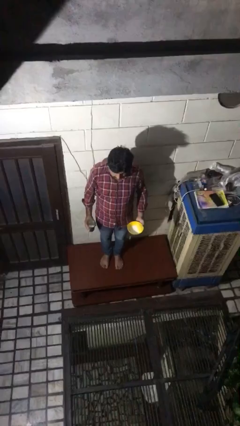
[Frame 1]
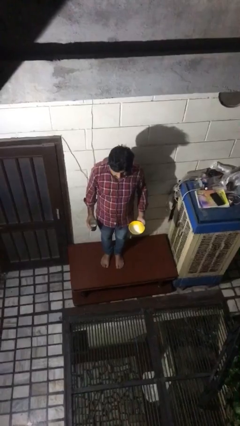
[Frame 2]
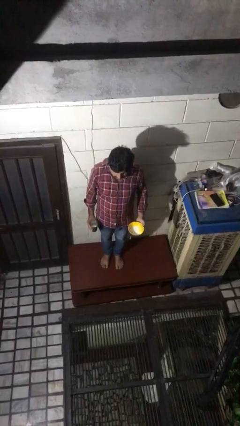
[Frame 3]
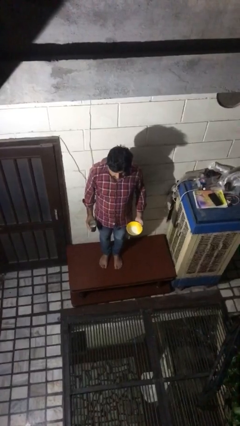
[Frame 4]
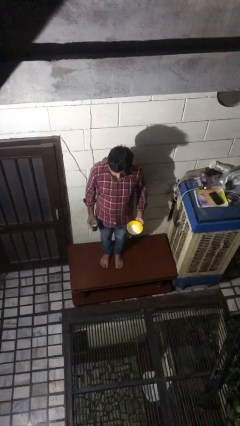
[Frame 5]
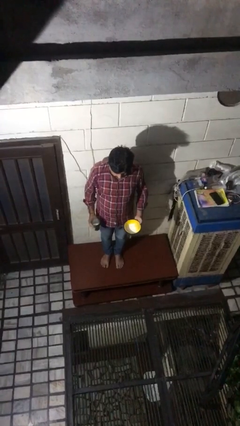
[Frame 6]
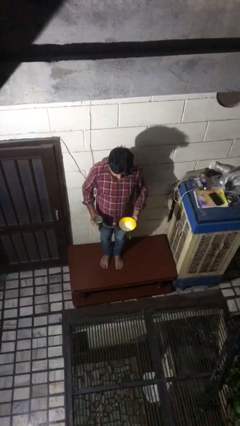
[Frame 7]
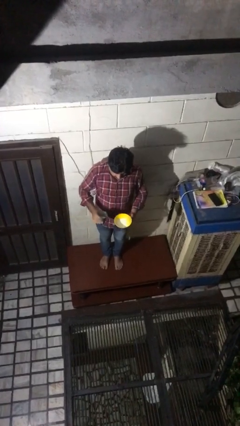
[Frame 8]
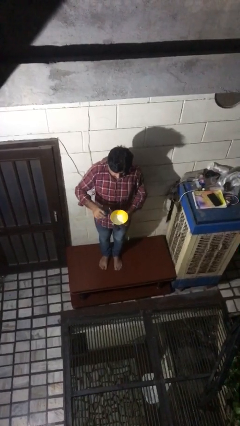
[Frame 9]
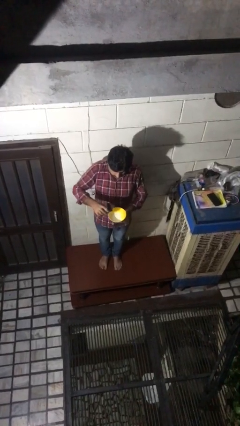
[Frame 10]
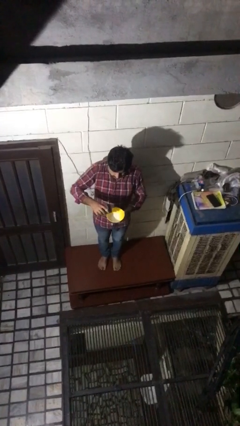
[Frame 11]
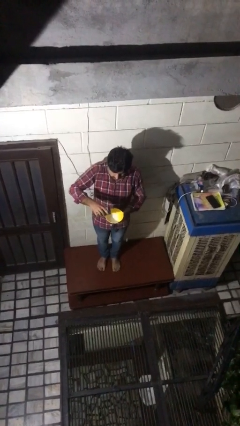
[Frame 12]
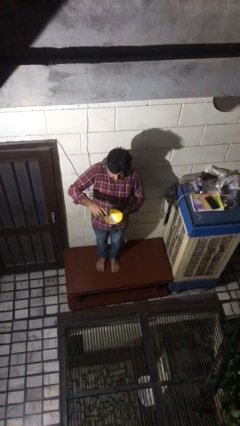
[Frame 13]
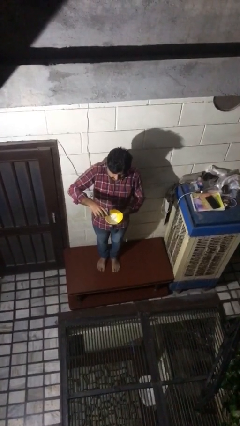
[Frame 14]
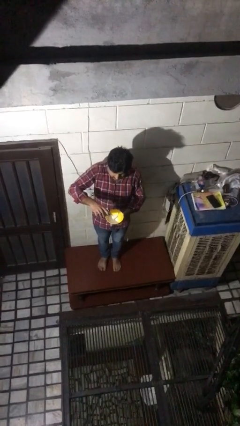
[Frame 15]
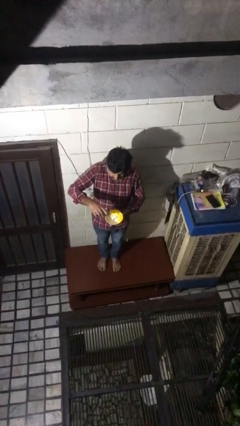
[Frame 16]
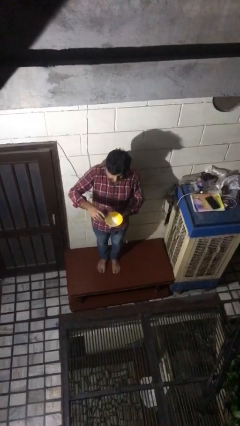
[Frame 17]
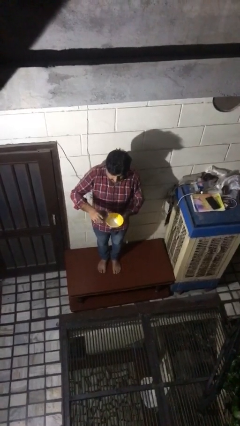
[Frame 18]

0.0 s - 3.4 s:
person pours into bowl

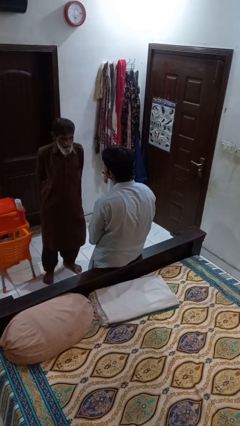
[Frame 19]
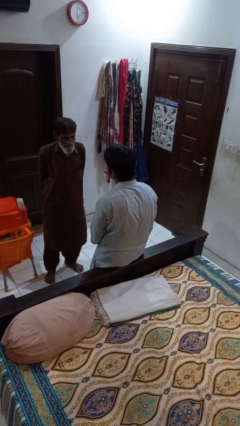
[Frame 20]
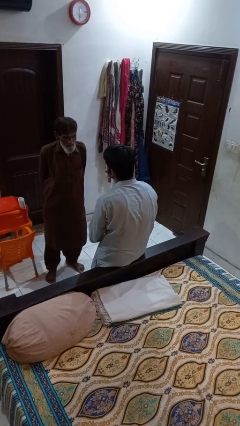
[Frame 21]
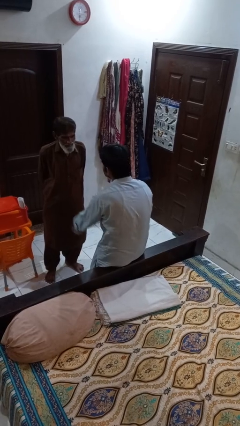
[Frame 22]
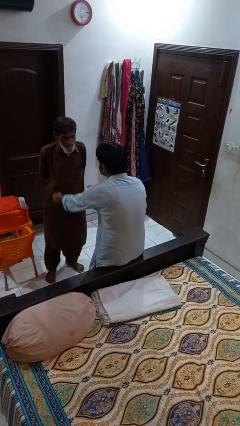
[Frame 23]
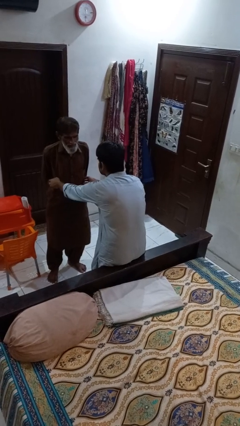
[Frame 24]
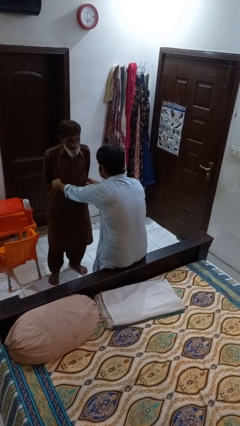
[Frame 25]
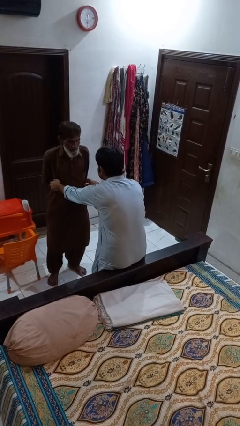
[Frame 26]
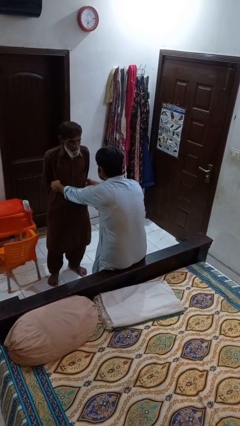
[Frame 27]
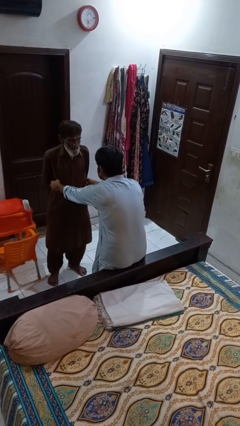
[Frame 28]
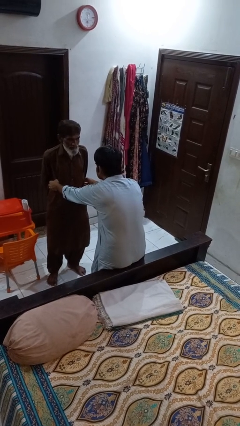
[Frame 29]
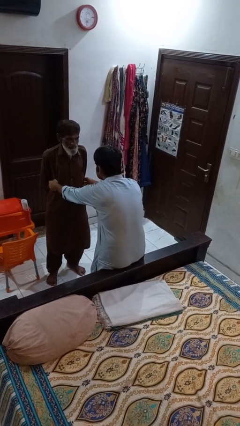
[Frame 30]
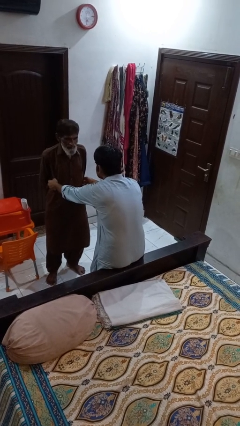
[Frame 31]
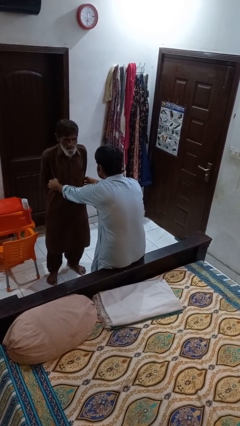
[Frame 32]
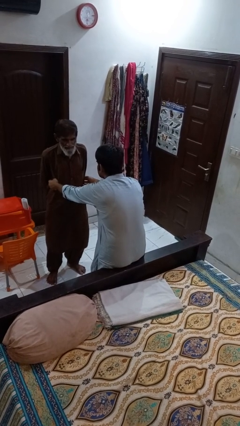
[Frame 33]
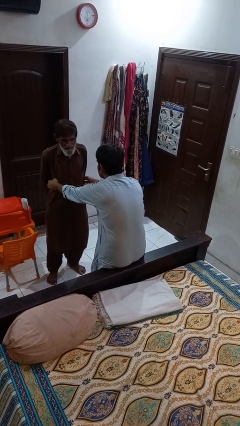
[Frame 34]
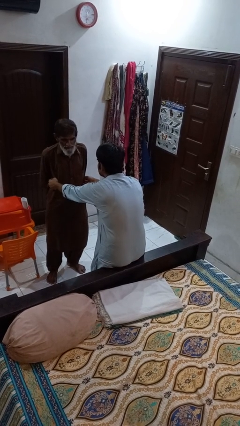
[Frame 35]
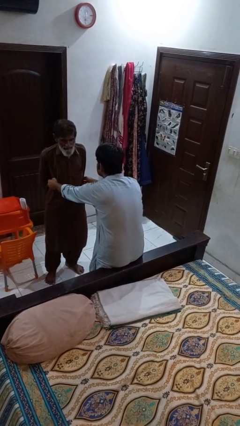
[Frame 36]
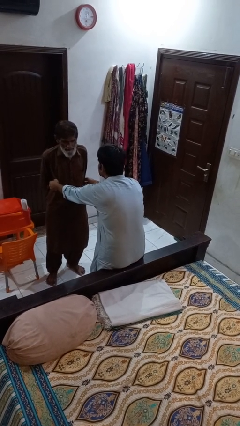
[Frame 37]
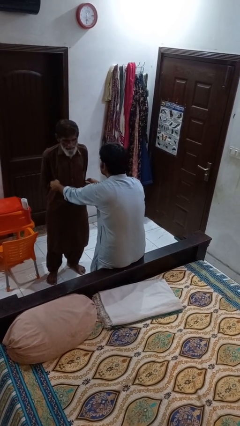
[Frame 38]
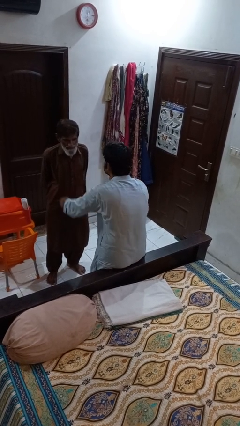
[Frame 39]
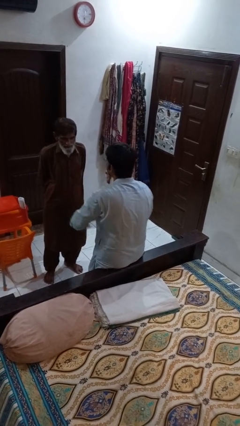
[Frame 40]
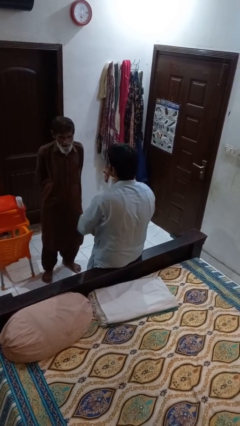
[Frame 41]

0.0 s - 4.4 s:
person tickles person

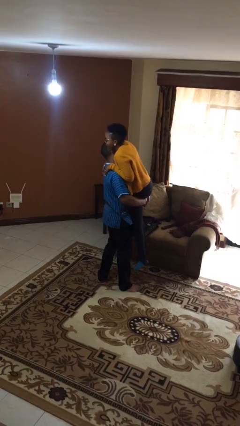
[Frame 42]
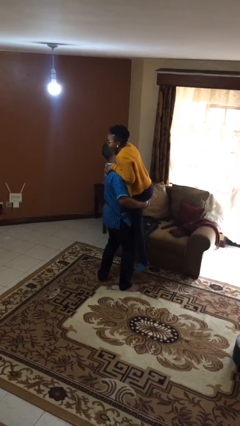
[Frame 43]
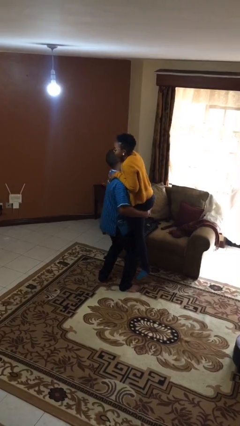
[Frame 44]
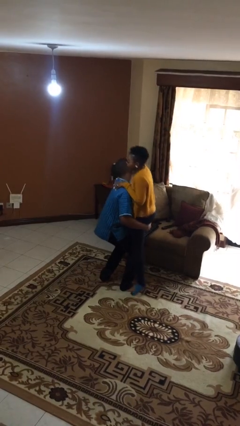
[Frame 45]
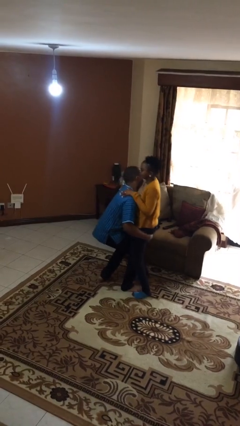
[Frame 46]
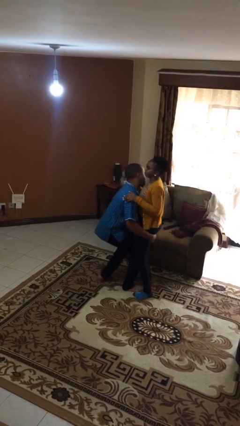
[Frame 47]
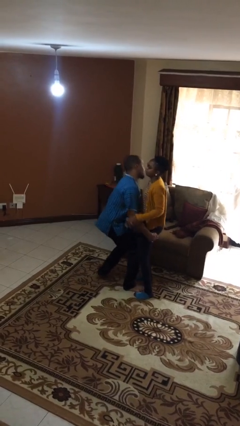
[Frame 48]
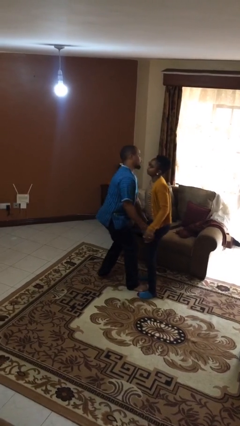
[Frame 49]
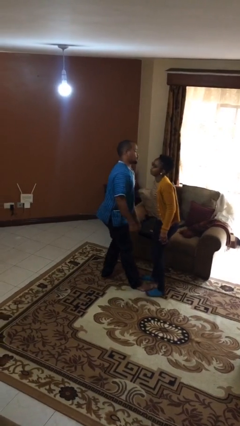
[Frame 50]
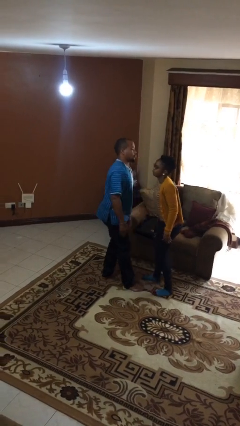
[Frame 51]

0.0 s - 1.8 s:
person puts down person

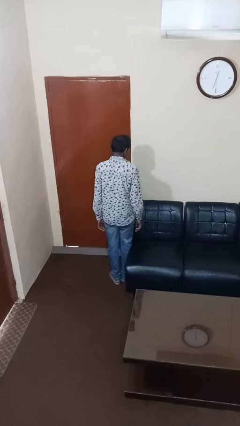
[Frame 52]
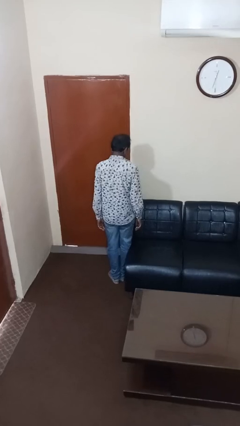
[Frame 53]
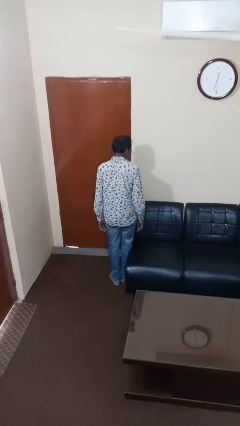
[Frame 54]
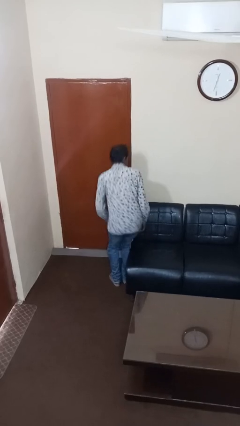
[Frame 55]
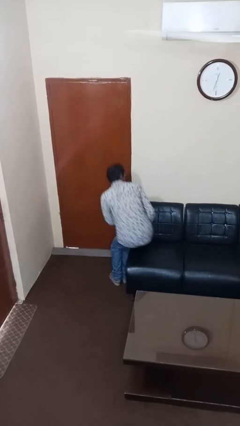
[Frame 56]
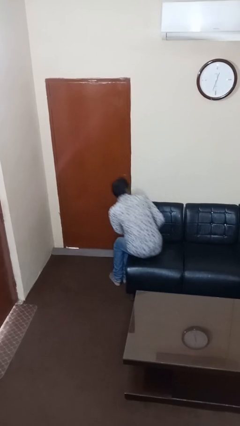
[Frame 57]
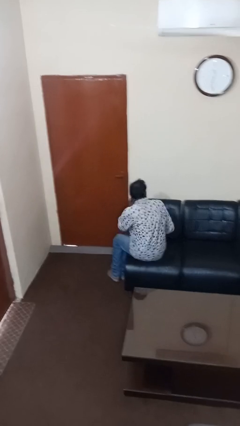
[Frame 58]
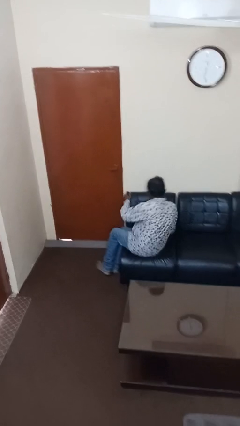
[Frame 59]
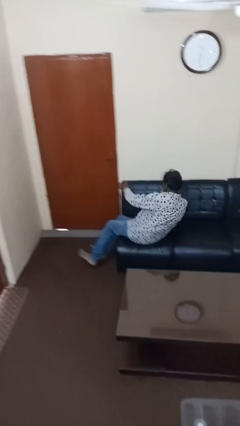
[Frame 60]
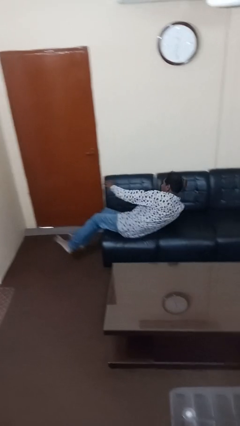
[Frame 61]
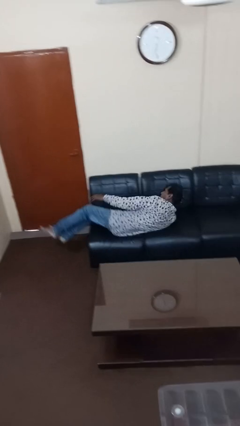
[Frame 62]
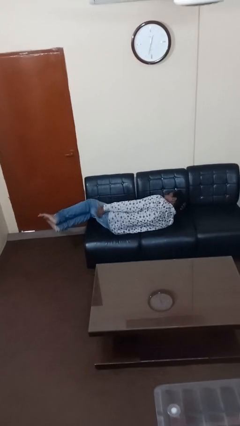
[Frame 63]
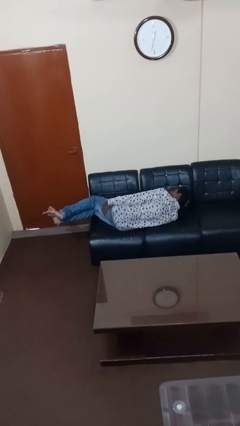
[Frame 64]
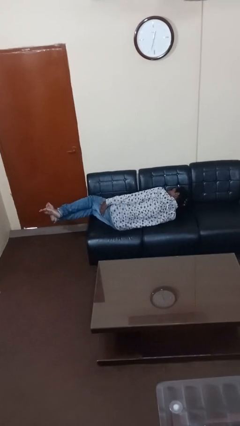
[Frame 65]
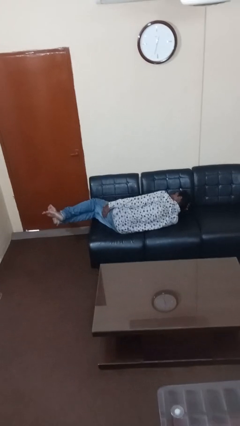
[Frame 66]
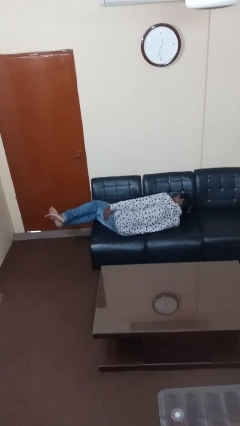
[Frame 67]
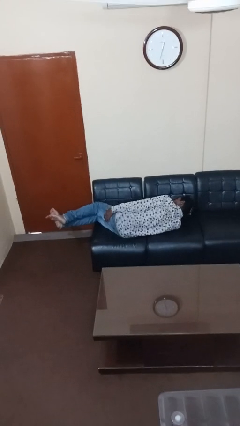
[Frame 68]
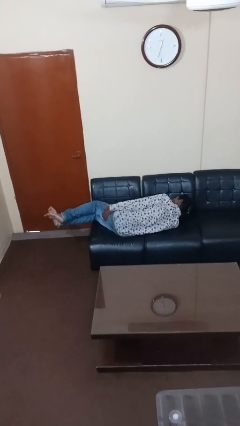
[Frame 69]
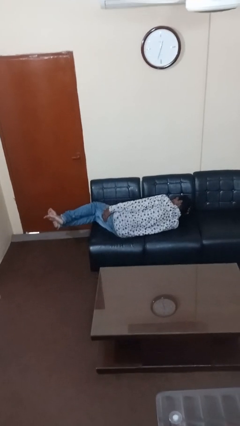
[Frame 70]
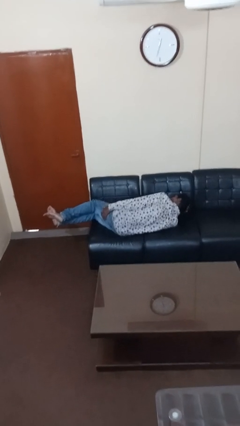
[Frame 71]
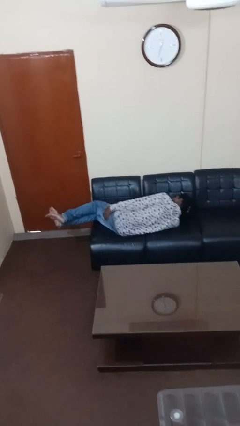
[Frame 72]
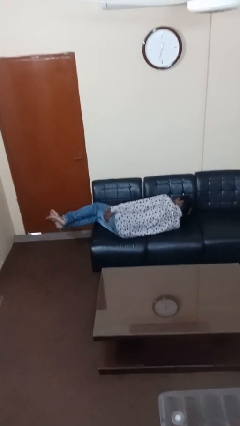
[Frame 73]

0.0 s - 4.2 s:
person lies down on couch

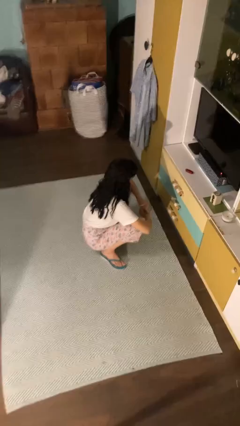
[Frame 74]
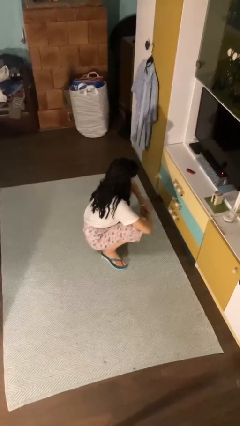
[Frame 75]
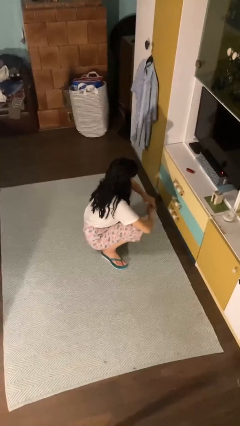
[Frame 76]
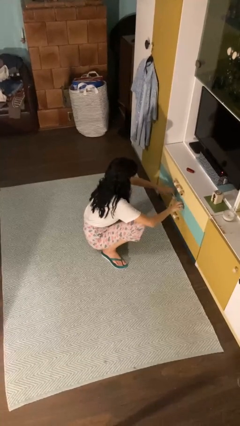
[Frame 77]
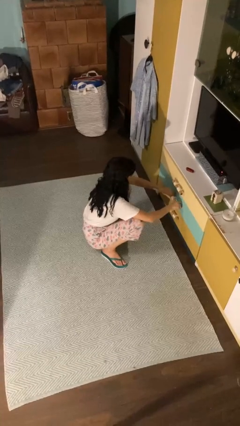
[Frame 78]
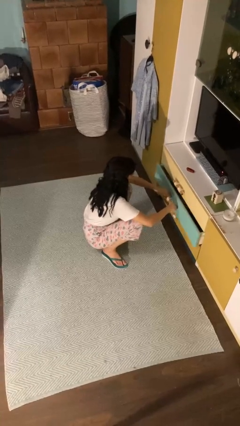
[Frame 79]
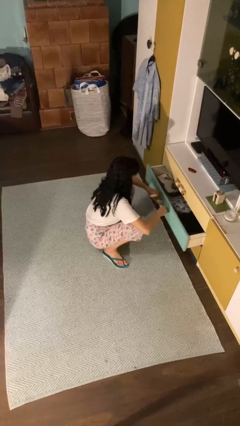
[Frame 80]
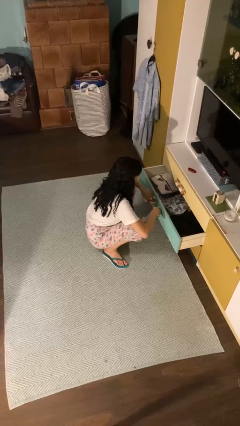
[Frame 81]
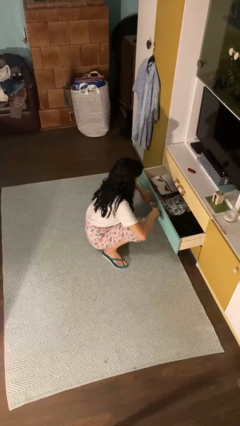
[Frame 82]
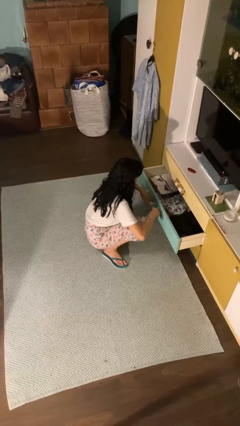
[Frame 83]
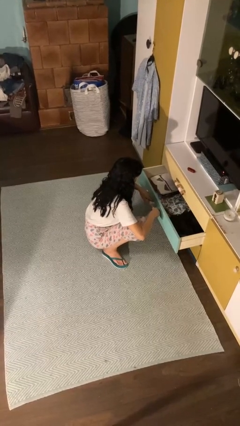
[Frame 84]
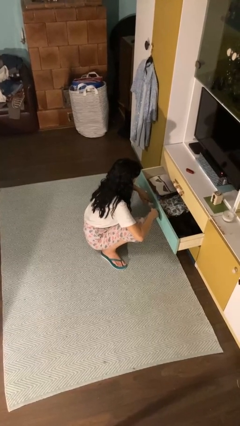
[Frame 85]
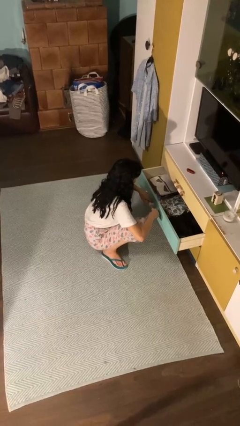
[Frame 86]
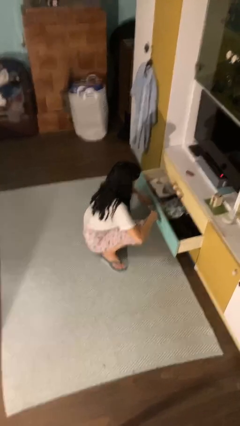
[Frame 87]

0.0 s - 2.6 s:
person opens dresser drawer

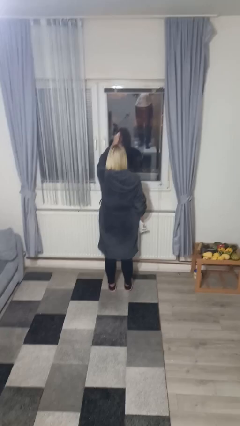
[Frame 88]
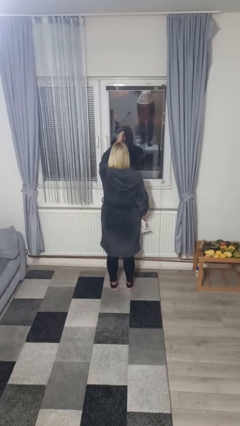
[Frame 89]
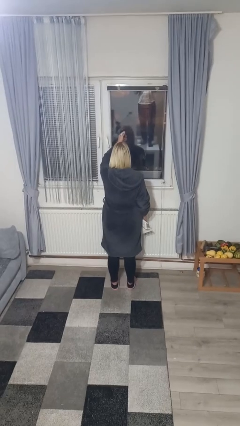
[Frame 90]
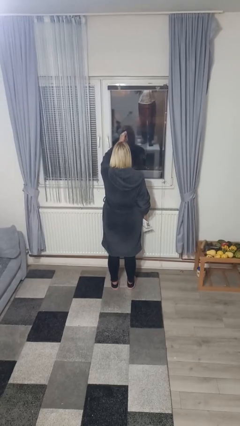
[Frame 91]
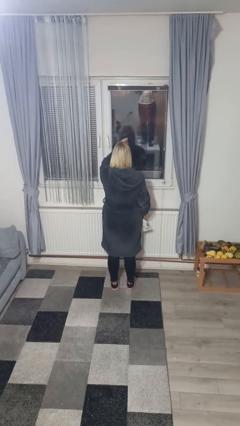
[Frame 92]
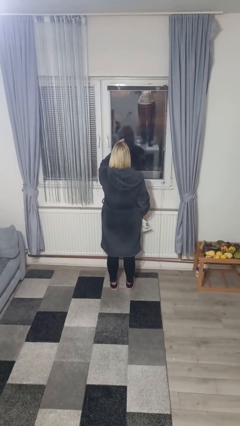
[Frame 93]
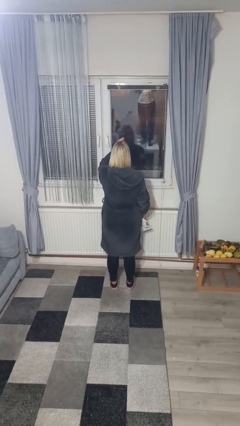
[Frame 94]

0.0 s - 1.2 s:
person sprays from bottle
